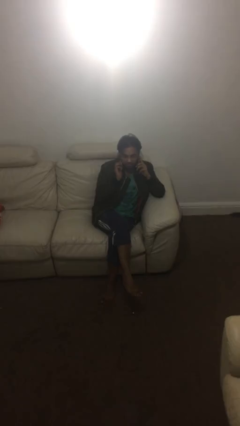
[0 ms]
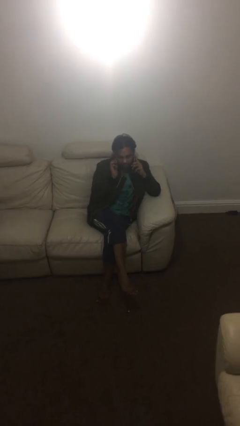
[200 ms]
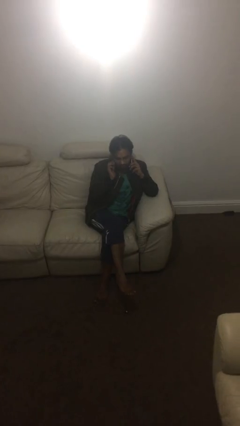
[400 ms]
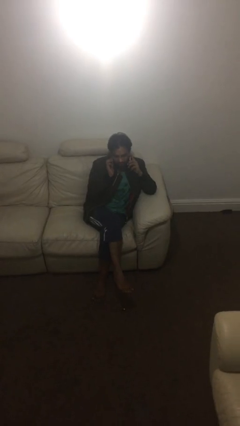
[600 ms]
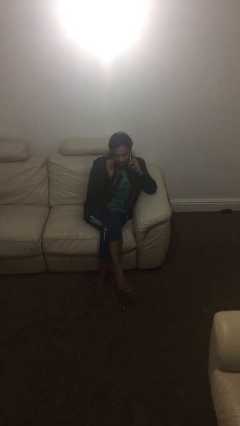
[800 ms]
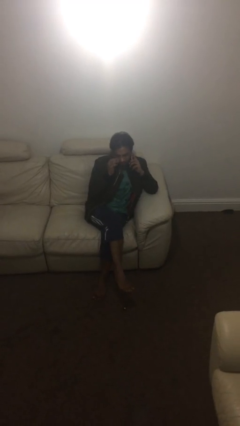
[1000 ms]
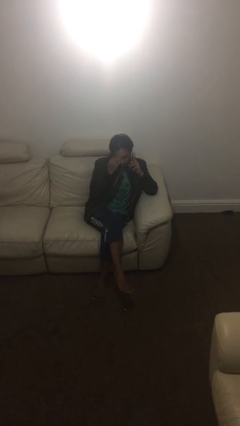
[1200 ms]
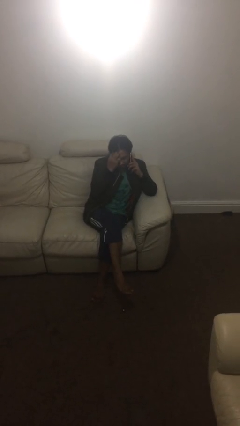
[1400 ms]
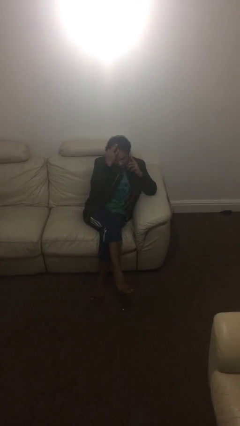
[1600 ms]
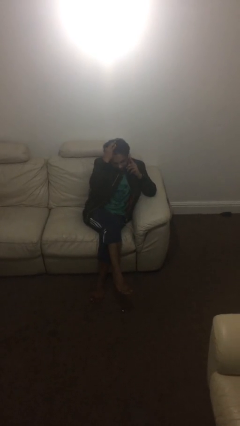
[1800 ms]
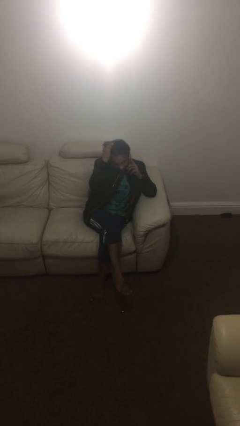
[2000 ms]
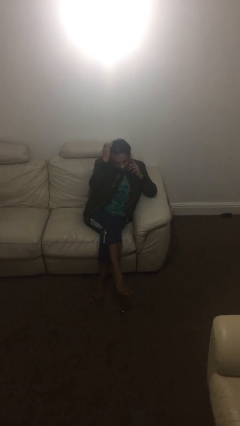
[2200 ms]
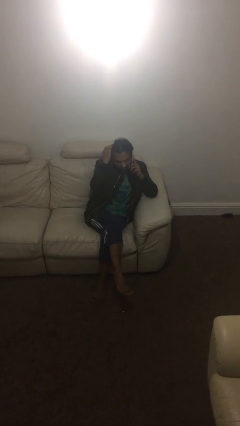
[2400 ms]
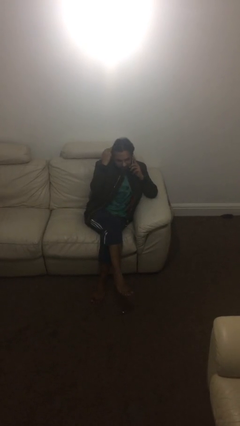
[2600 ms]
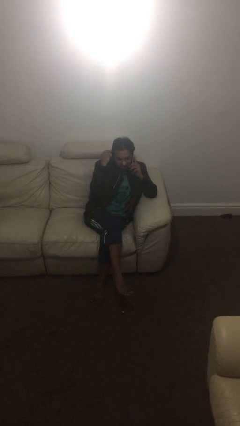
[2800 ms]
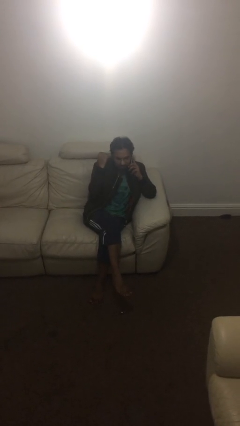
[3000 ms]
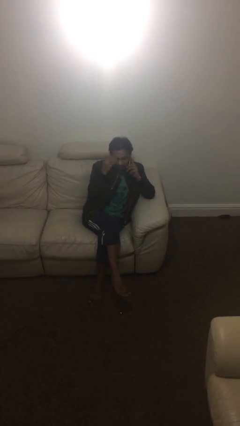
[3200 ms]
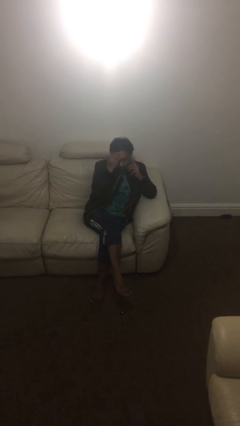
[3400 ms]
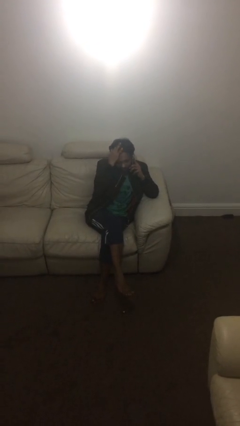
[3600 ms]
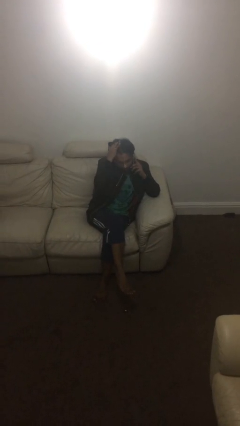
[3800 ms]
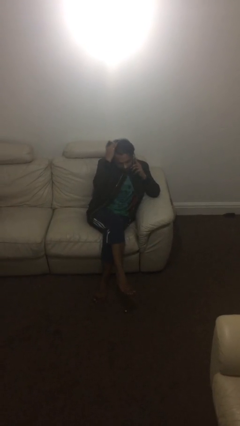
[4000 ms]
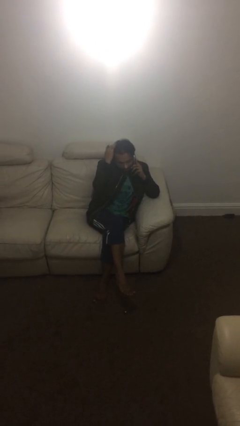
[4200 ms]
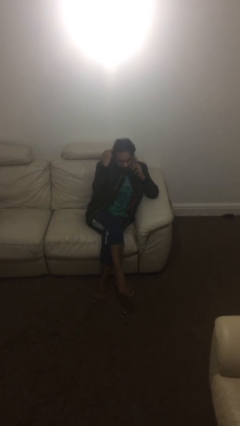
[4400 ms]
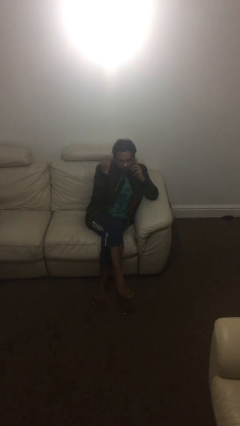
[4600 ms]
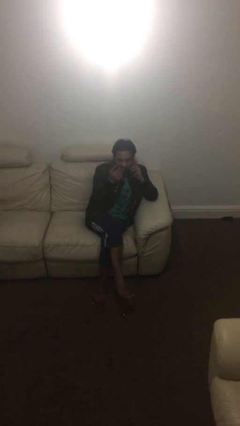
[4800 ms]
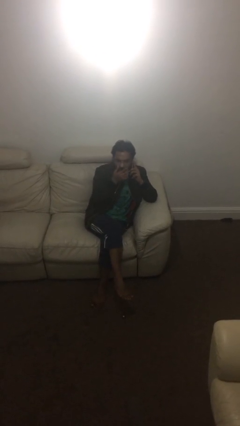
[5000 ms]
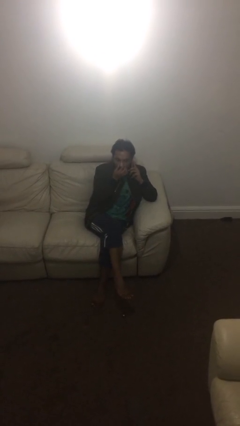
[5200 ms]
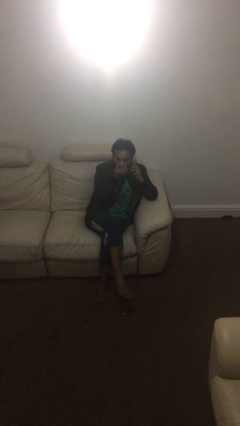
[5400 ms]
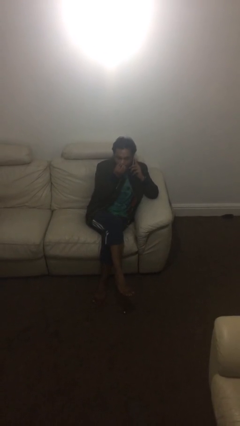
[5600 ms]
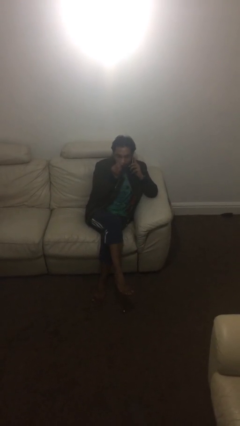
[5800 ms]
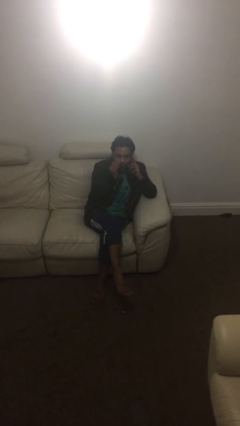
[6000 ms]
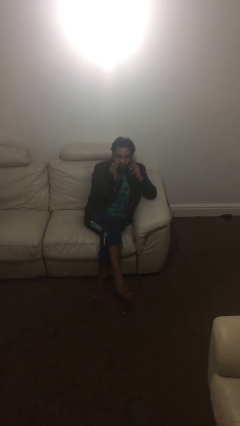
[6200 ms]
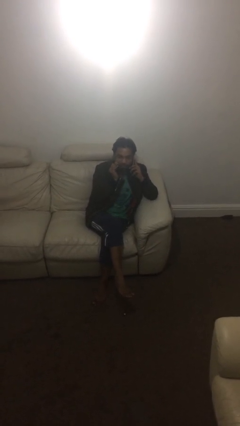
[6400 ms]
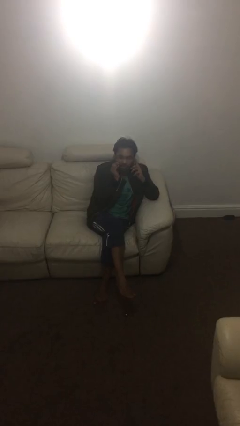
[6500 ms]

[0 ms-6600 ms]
person talks on phone

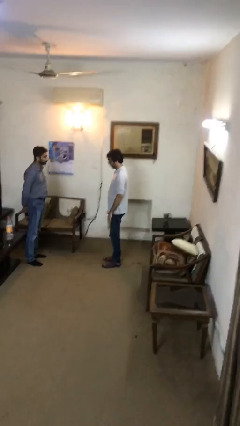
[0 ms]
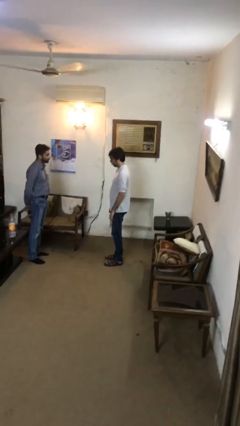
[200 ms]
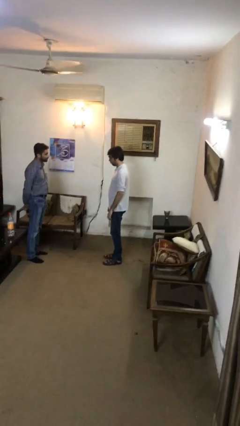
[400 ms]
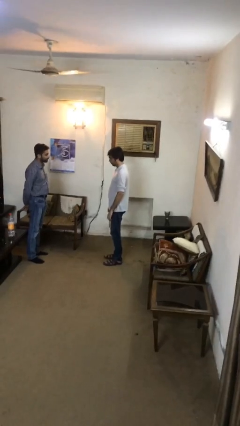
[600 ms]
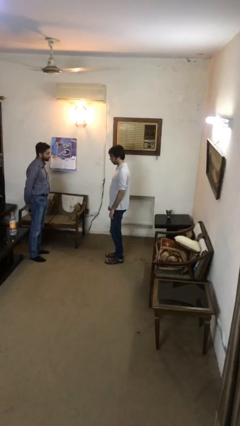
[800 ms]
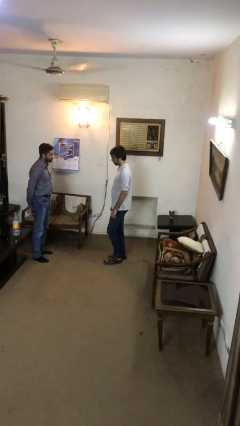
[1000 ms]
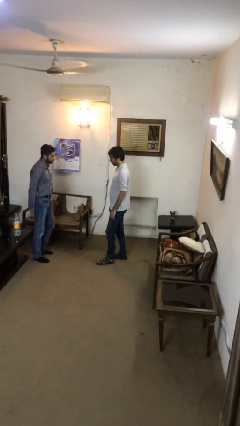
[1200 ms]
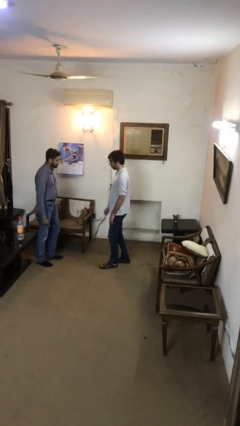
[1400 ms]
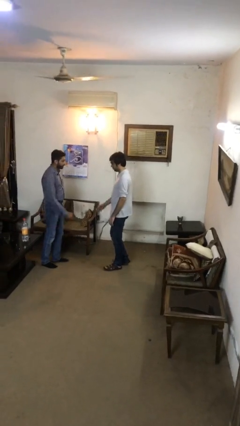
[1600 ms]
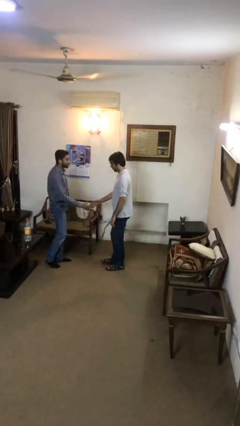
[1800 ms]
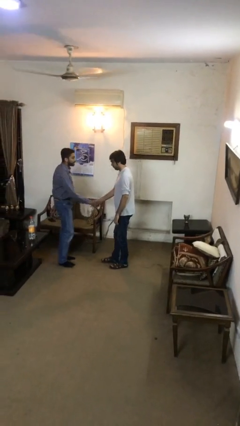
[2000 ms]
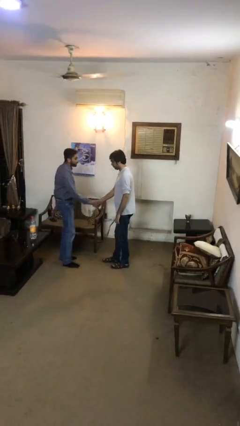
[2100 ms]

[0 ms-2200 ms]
person shakes hand

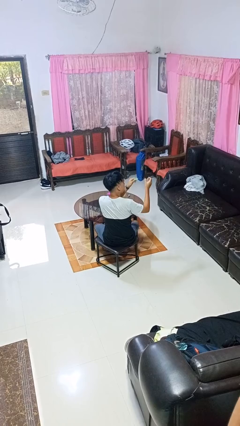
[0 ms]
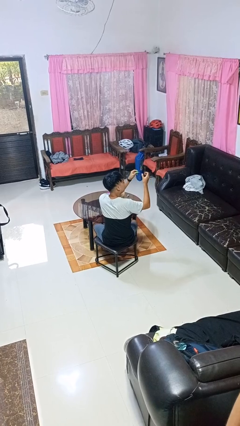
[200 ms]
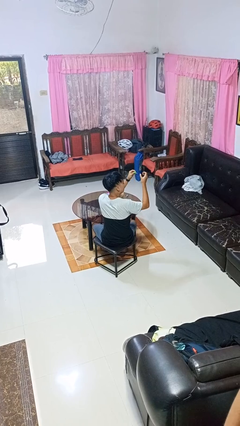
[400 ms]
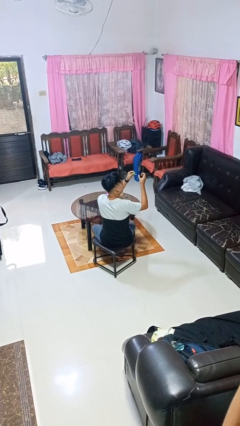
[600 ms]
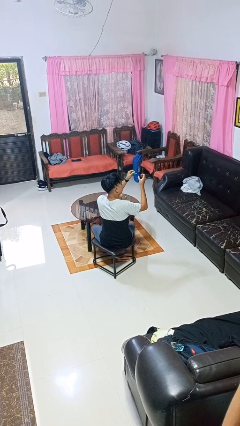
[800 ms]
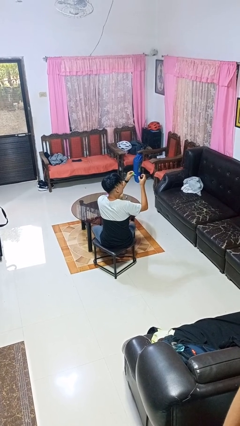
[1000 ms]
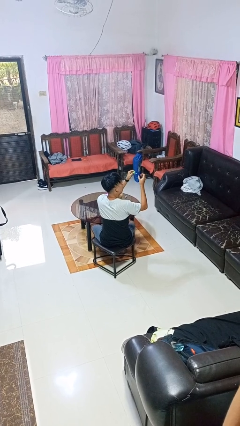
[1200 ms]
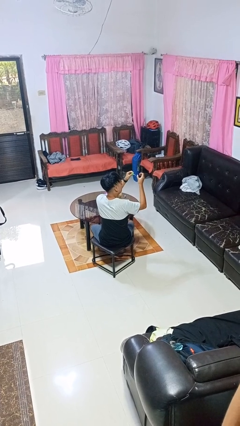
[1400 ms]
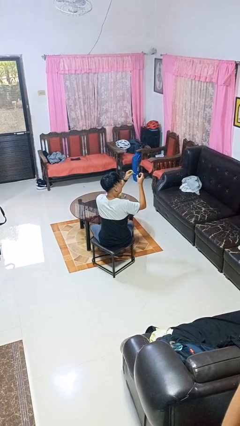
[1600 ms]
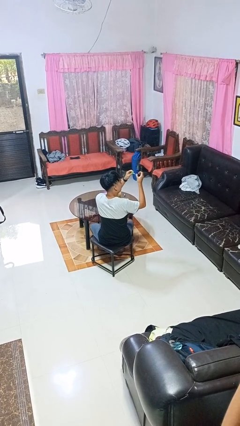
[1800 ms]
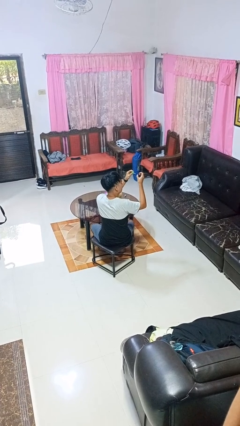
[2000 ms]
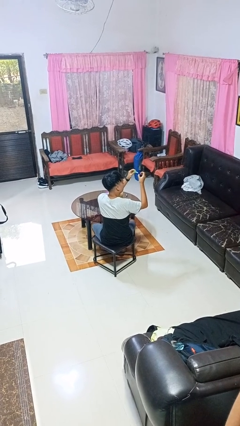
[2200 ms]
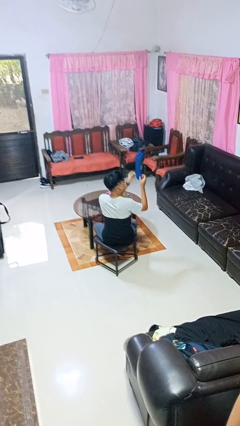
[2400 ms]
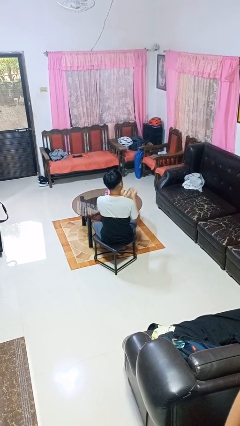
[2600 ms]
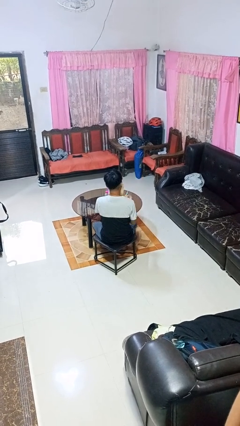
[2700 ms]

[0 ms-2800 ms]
person paints fingernails

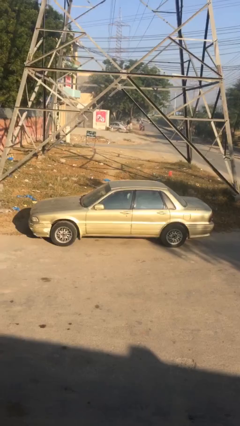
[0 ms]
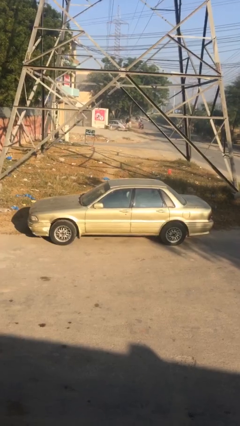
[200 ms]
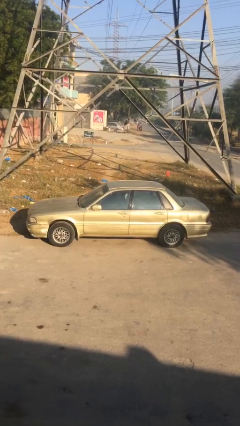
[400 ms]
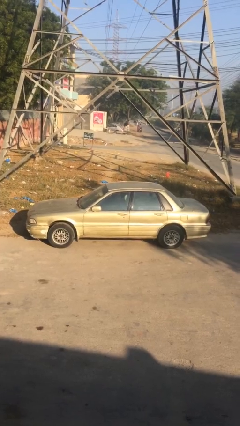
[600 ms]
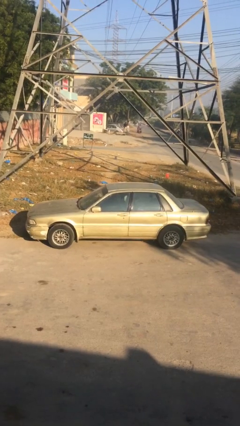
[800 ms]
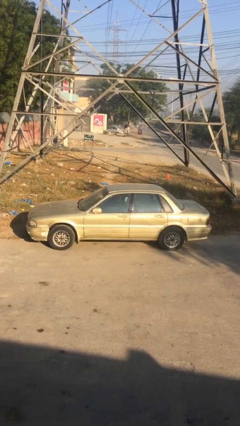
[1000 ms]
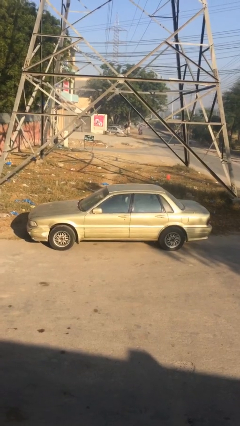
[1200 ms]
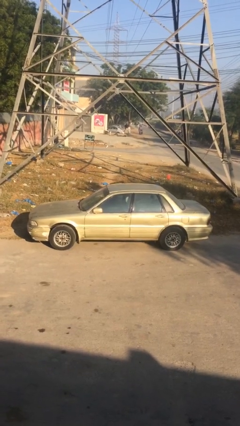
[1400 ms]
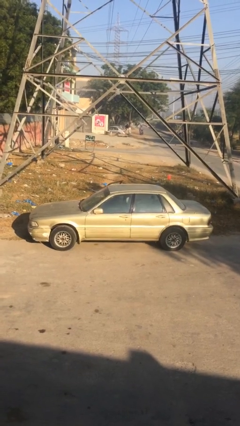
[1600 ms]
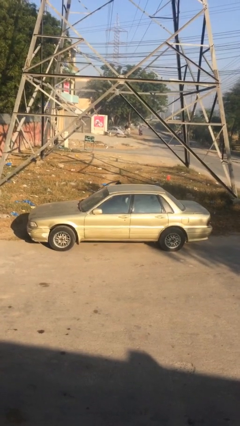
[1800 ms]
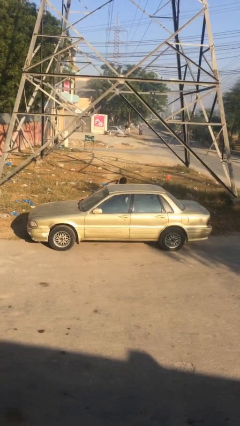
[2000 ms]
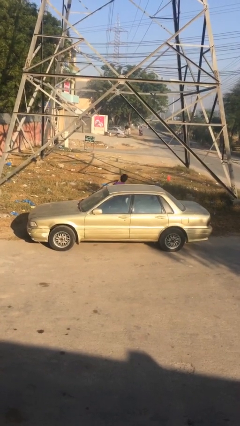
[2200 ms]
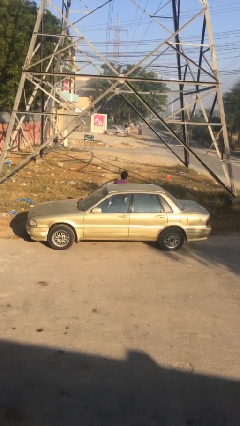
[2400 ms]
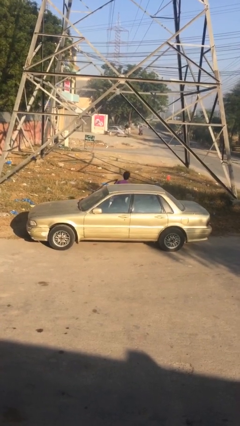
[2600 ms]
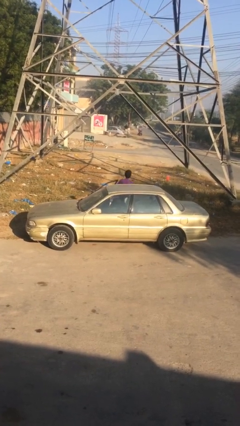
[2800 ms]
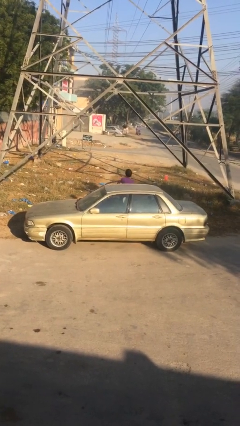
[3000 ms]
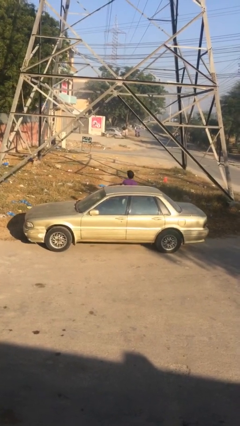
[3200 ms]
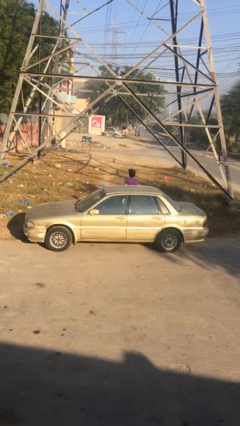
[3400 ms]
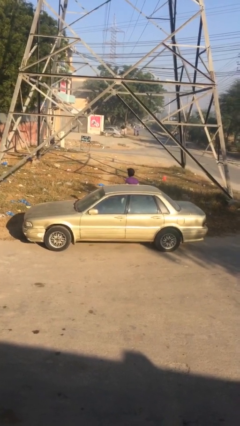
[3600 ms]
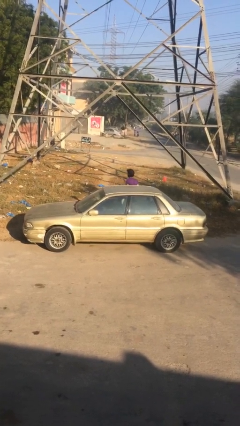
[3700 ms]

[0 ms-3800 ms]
car drops off person

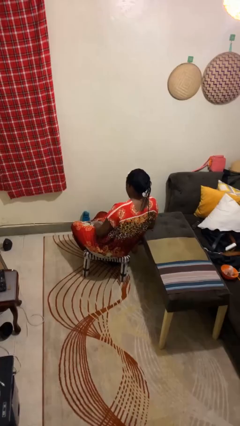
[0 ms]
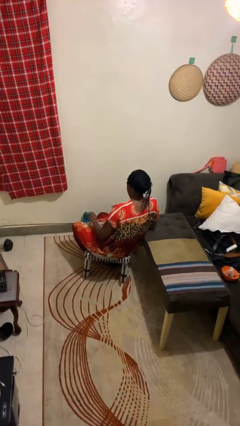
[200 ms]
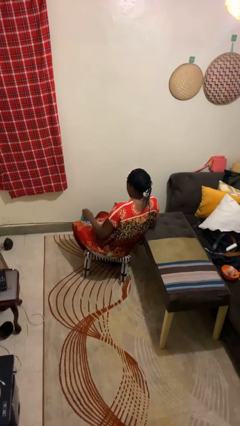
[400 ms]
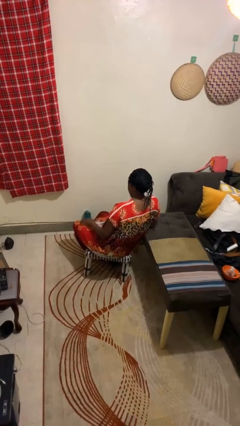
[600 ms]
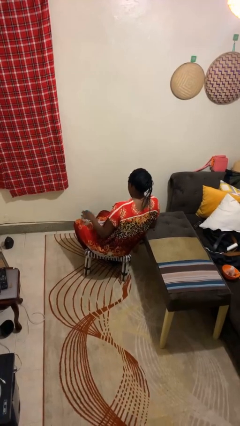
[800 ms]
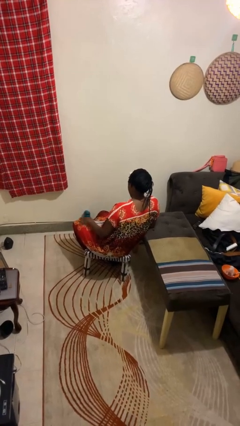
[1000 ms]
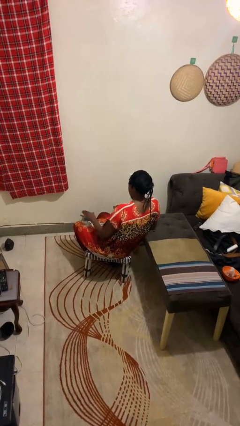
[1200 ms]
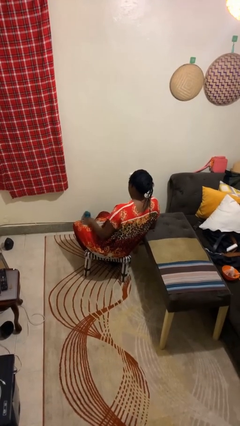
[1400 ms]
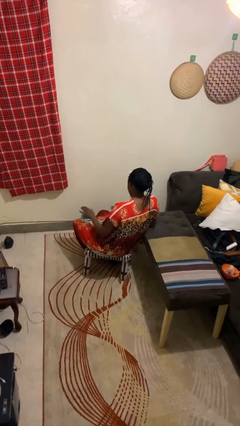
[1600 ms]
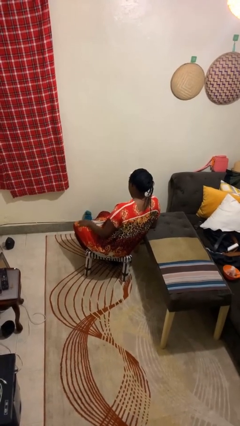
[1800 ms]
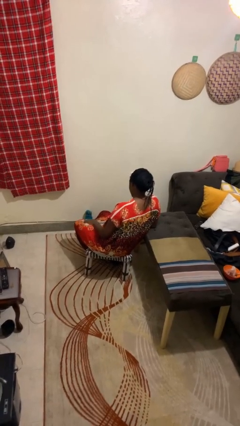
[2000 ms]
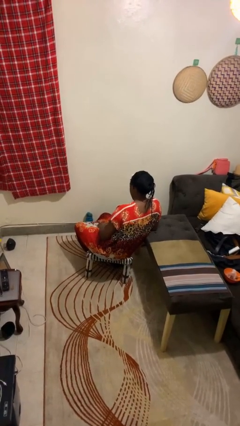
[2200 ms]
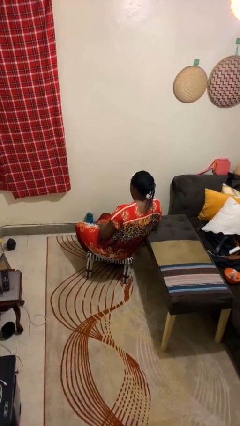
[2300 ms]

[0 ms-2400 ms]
person slaps hands on thighs
